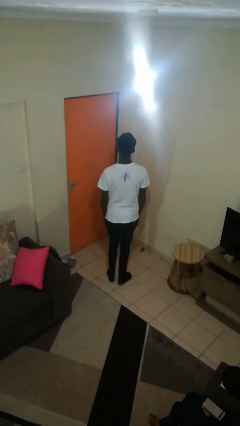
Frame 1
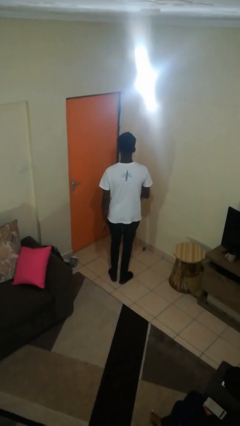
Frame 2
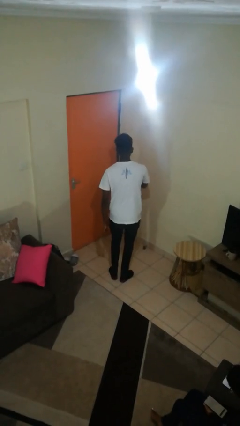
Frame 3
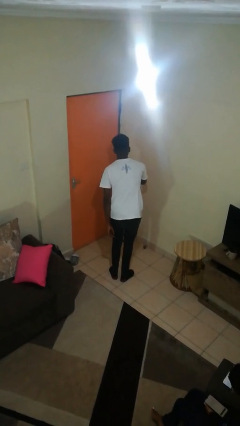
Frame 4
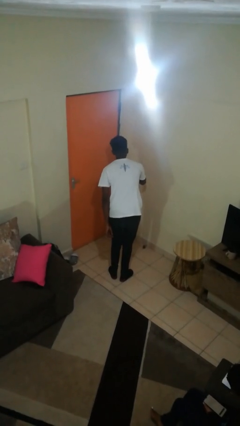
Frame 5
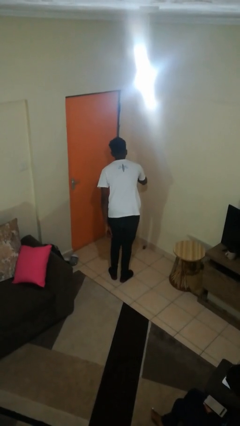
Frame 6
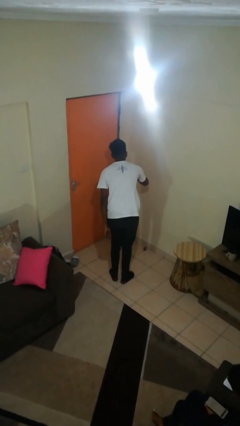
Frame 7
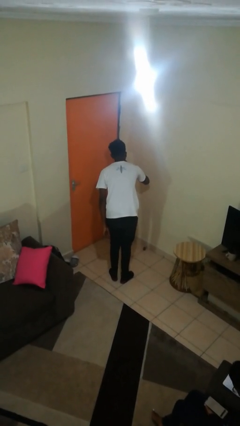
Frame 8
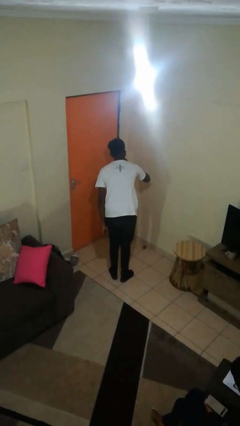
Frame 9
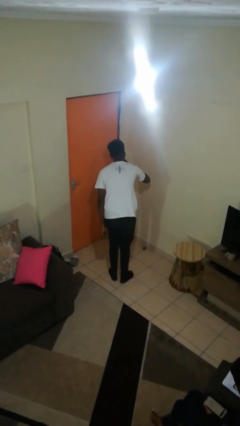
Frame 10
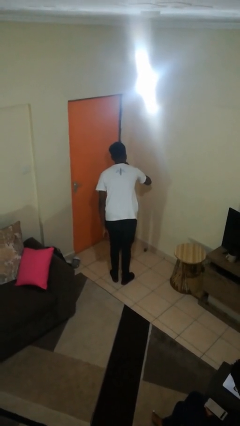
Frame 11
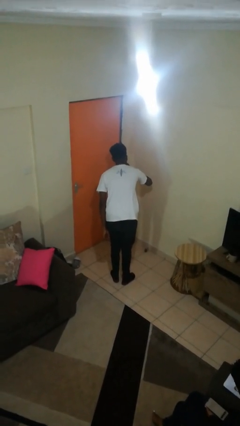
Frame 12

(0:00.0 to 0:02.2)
person gestures be quiet

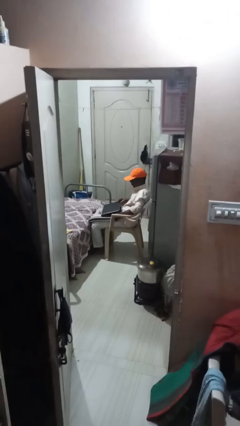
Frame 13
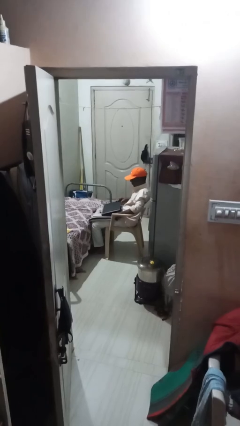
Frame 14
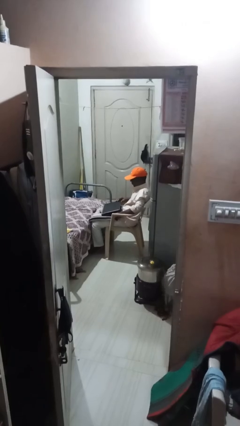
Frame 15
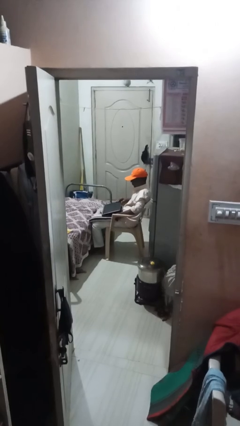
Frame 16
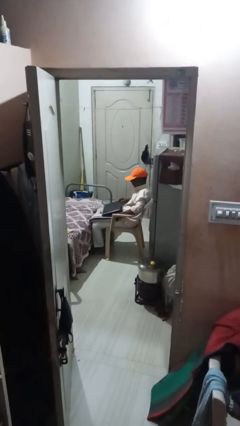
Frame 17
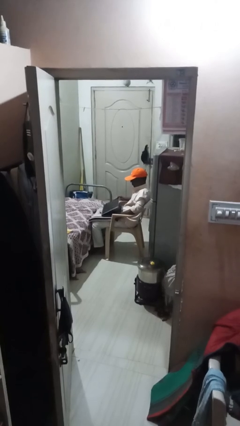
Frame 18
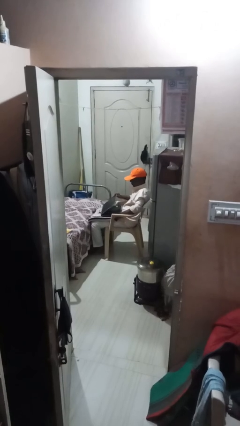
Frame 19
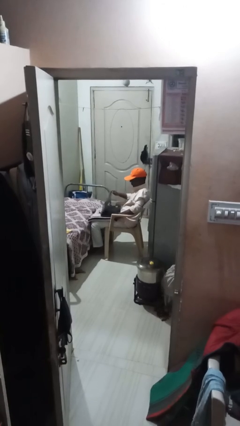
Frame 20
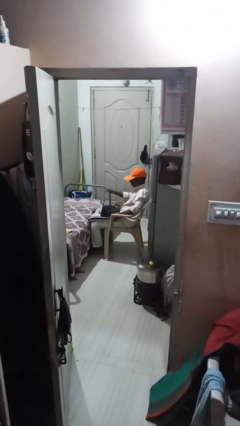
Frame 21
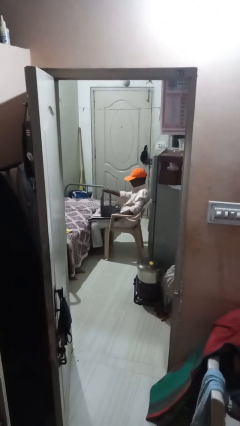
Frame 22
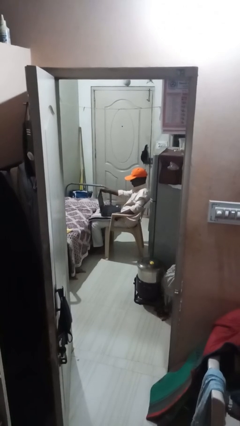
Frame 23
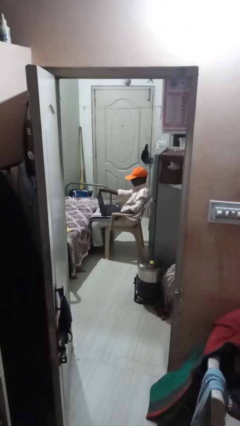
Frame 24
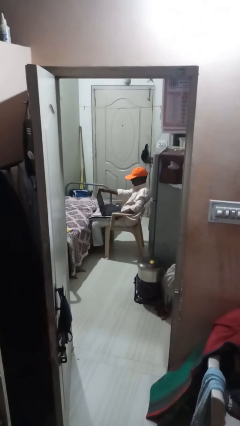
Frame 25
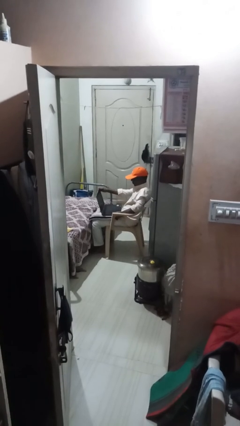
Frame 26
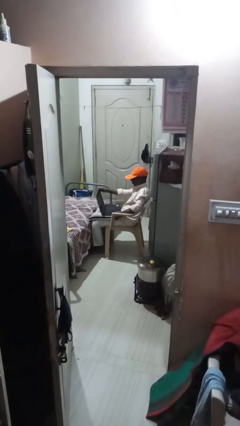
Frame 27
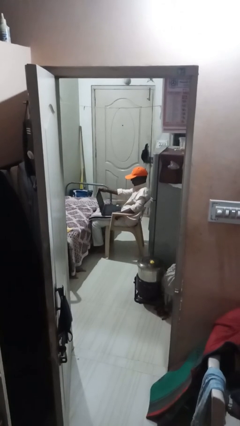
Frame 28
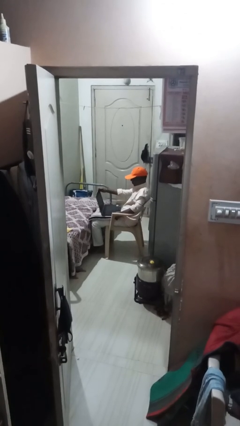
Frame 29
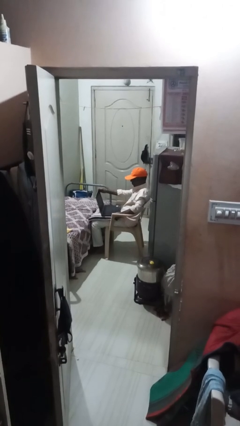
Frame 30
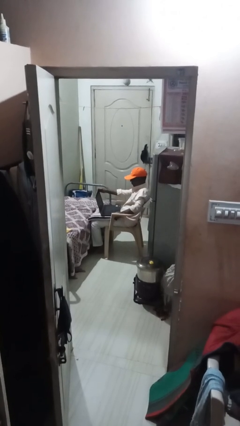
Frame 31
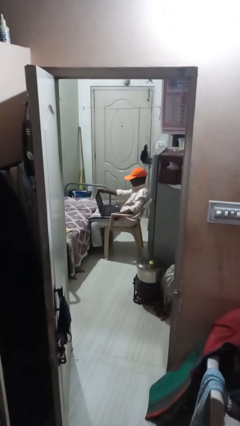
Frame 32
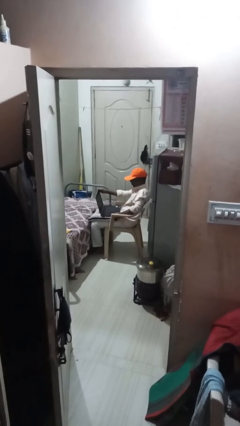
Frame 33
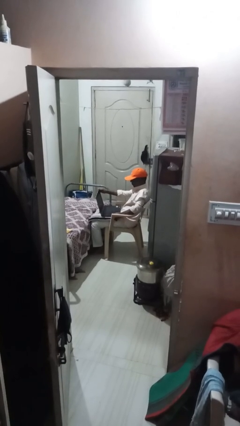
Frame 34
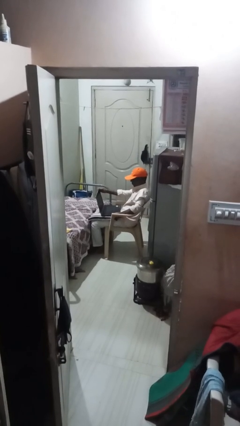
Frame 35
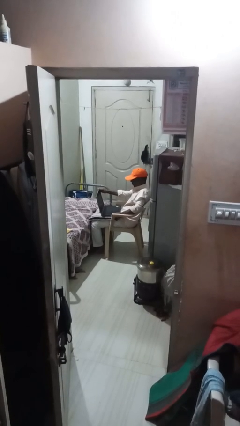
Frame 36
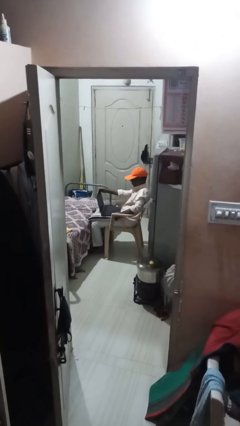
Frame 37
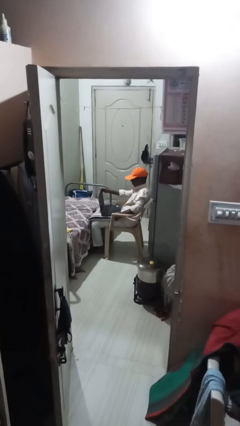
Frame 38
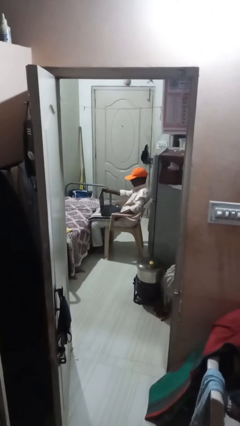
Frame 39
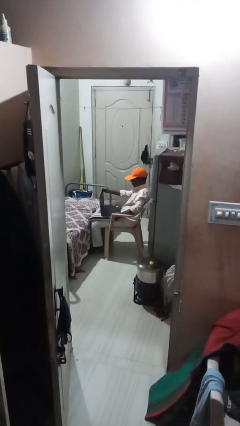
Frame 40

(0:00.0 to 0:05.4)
person interacts with laptop

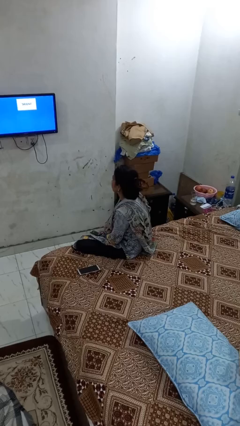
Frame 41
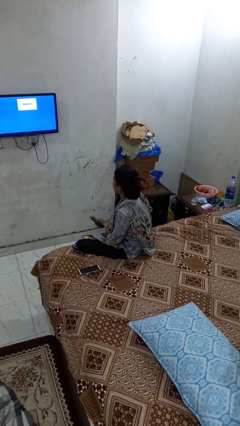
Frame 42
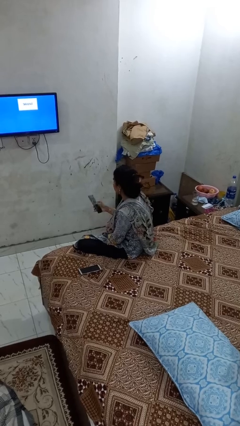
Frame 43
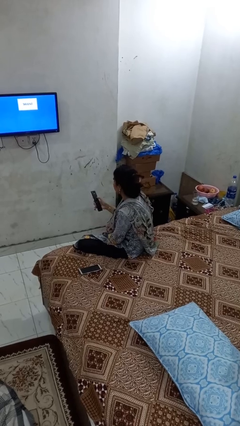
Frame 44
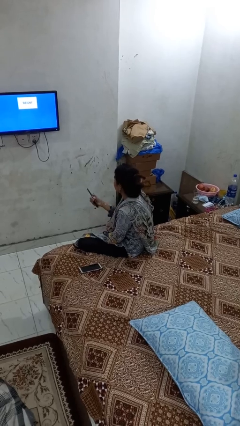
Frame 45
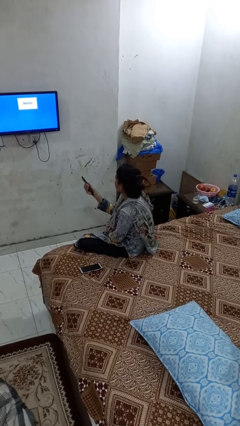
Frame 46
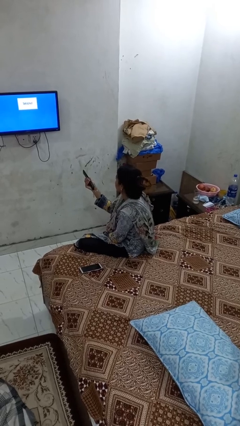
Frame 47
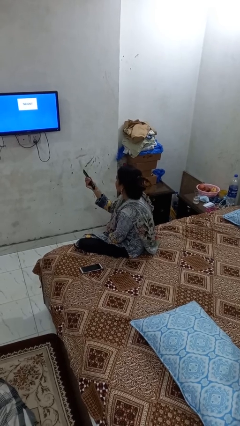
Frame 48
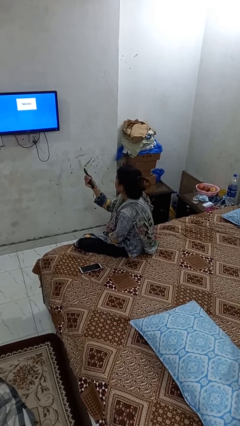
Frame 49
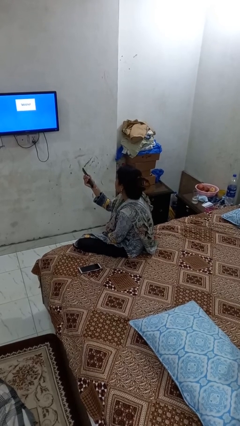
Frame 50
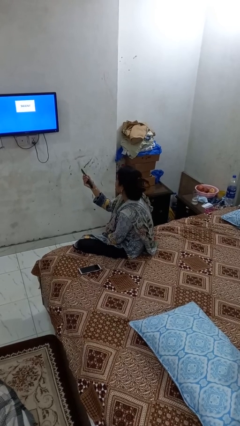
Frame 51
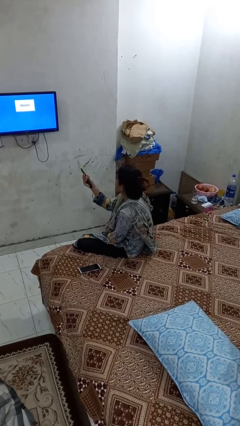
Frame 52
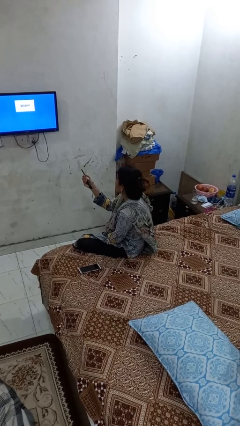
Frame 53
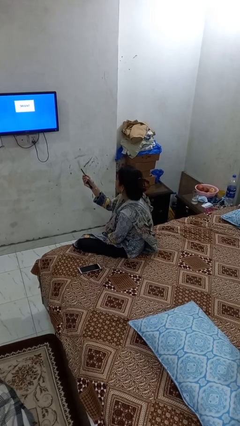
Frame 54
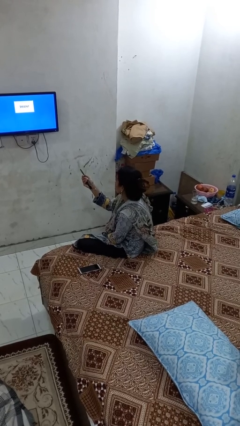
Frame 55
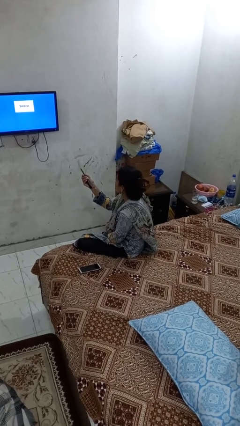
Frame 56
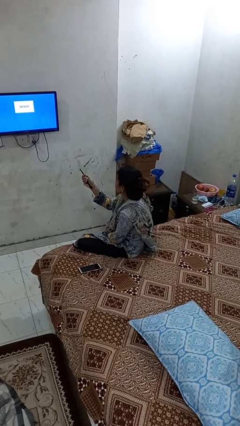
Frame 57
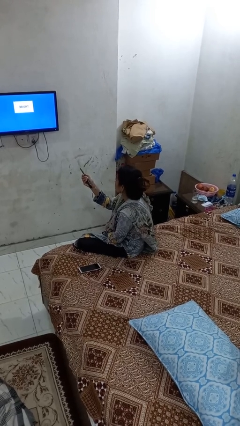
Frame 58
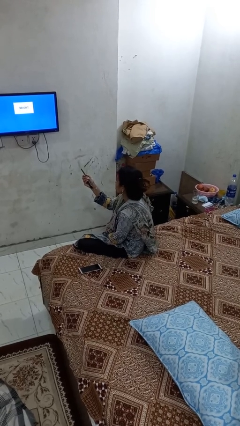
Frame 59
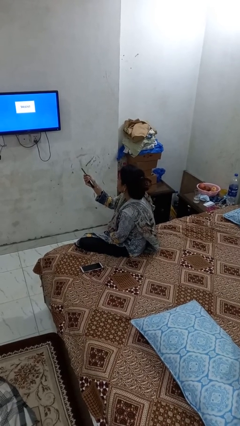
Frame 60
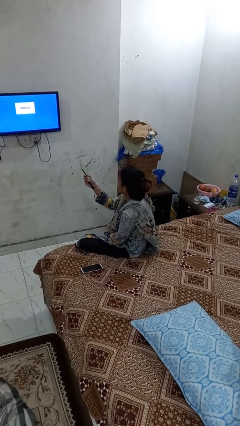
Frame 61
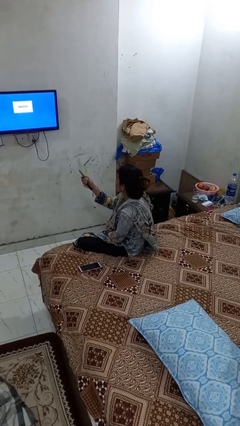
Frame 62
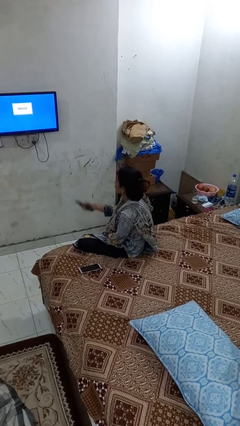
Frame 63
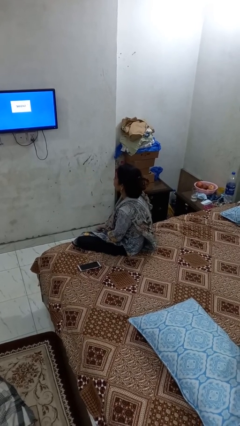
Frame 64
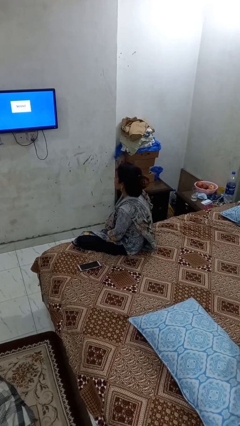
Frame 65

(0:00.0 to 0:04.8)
person uses television remote

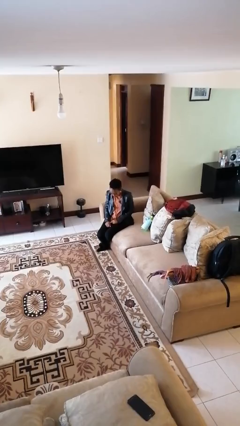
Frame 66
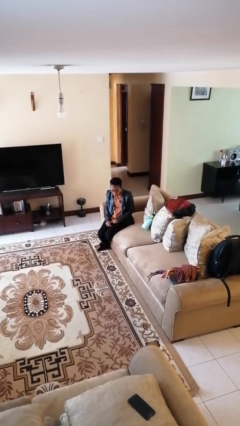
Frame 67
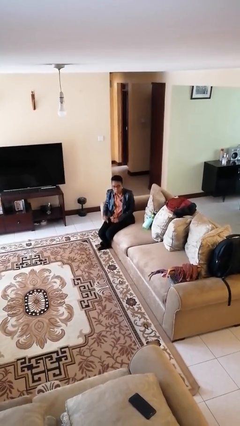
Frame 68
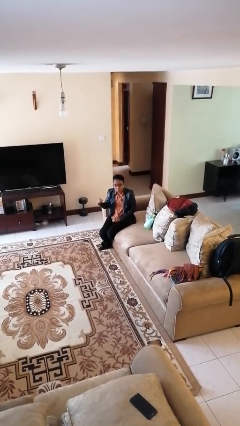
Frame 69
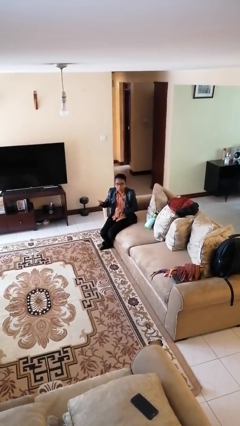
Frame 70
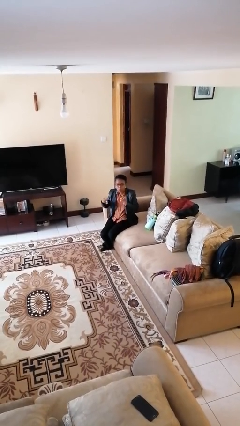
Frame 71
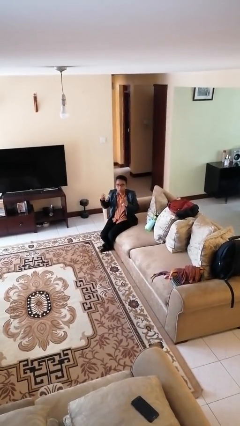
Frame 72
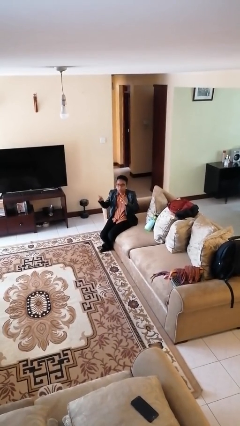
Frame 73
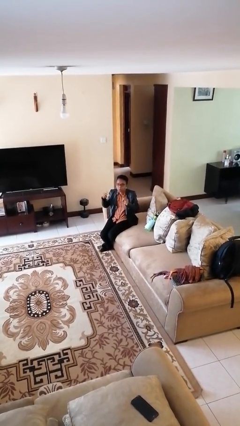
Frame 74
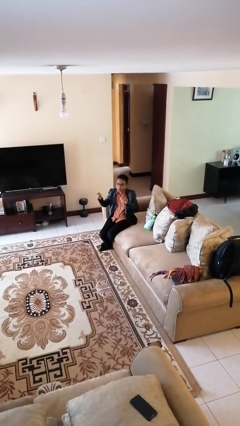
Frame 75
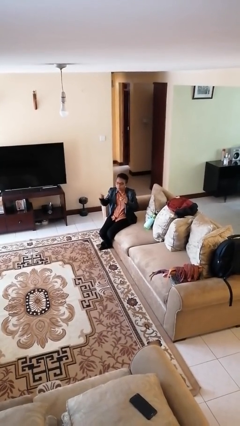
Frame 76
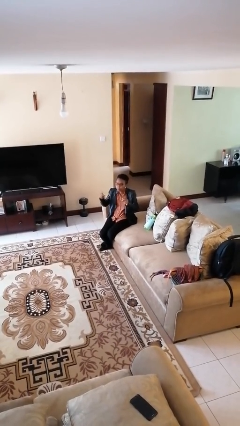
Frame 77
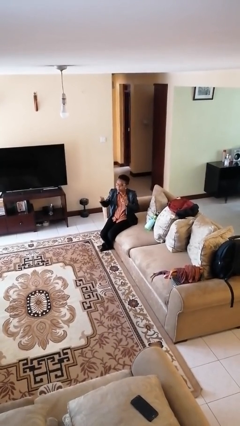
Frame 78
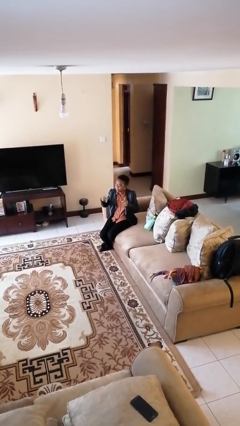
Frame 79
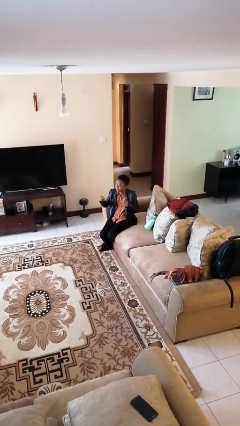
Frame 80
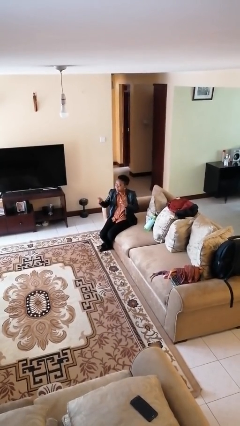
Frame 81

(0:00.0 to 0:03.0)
person snaps fingers

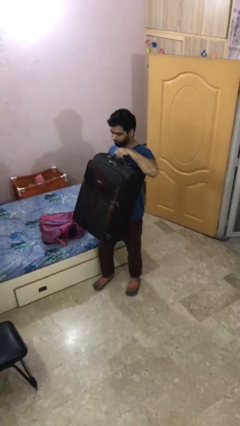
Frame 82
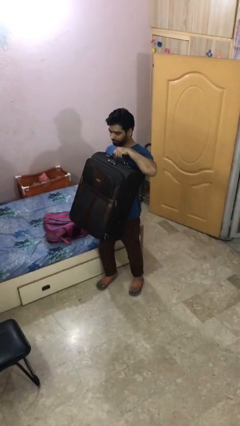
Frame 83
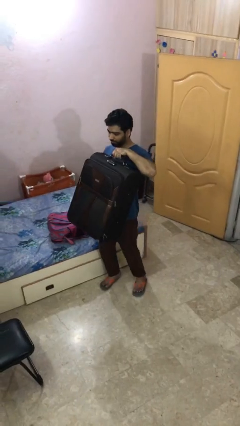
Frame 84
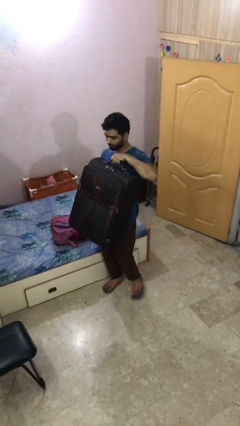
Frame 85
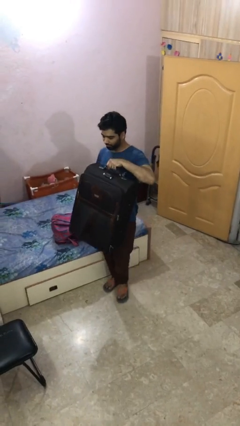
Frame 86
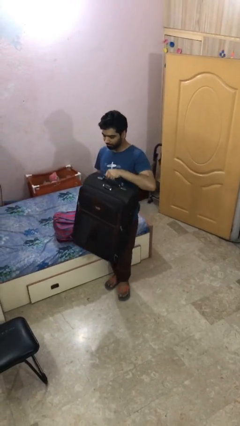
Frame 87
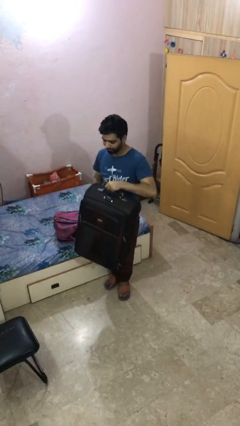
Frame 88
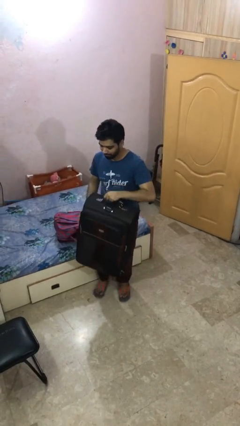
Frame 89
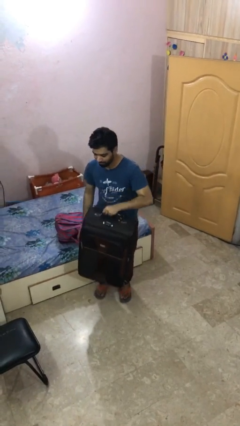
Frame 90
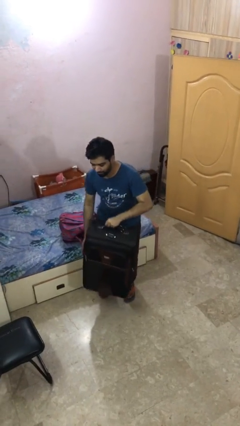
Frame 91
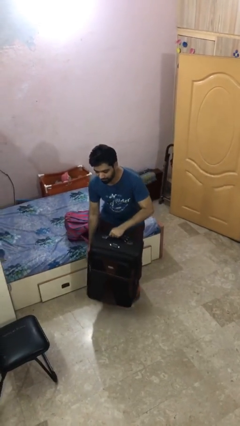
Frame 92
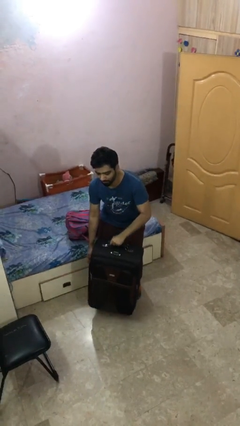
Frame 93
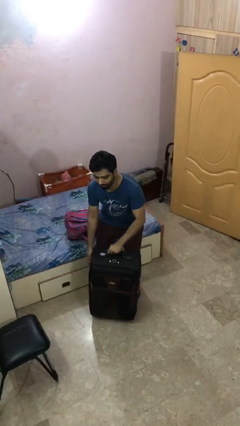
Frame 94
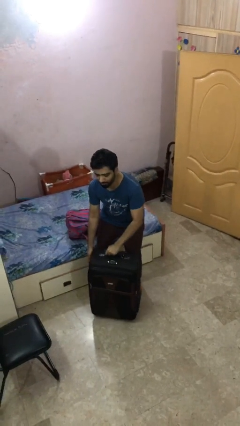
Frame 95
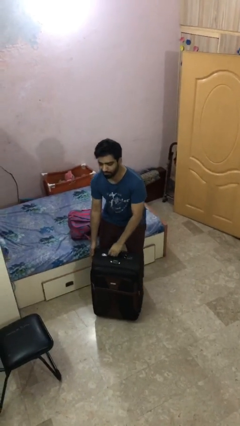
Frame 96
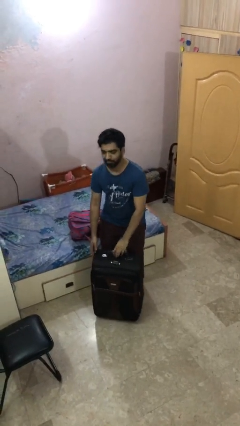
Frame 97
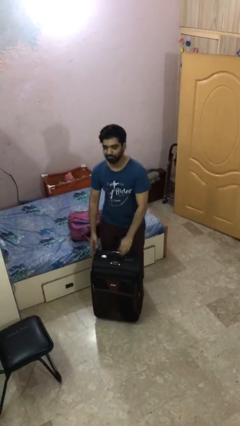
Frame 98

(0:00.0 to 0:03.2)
person puts down object on floor
